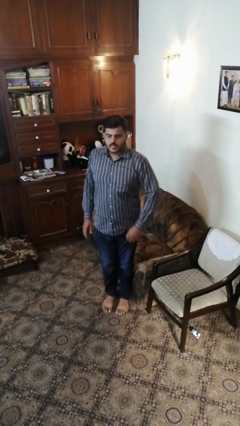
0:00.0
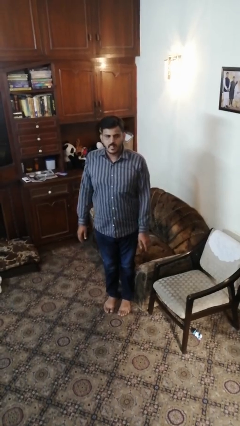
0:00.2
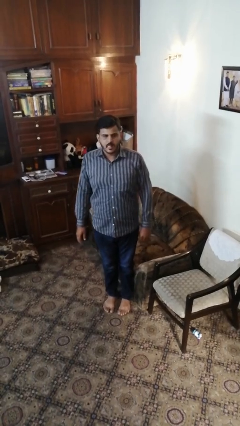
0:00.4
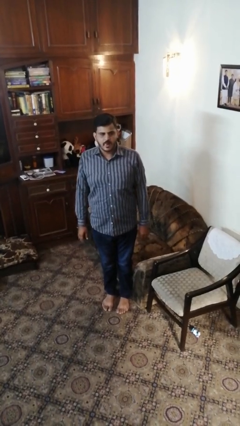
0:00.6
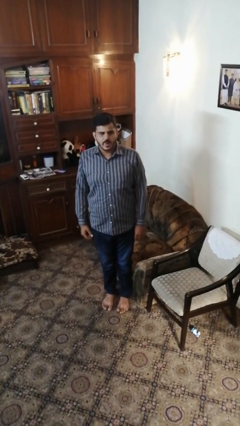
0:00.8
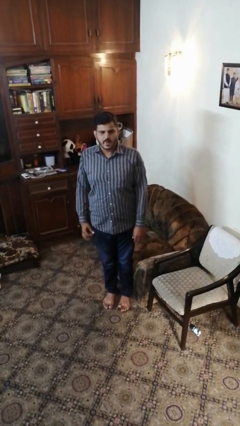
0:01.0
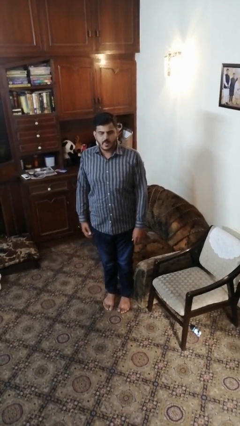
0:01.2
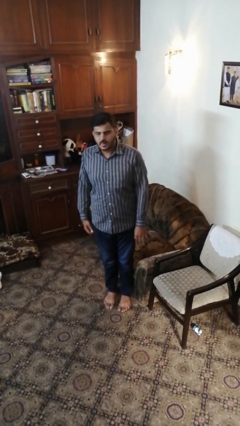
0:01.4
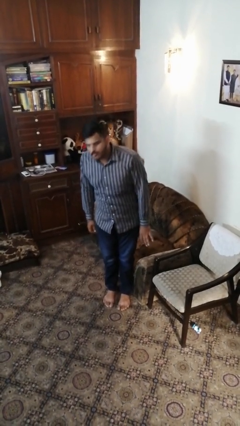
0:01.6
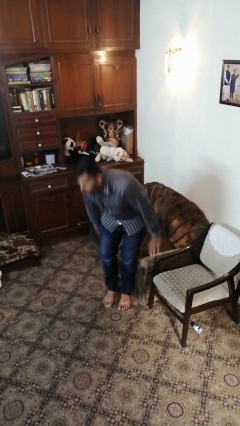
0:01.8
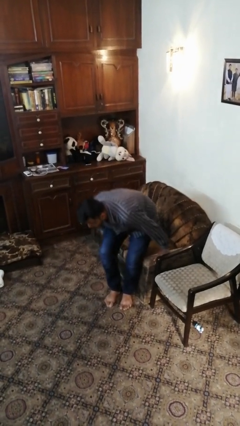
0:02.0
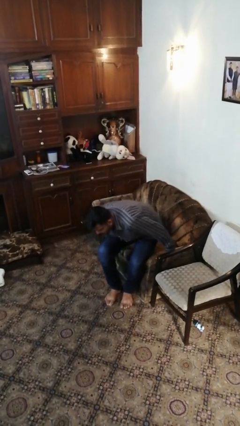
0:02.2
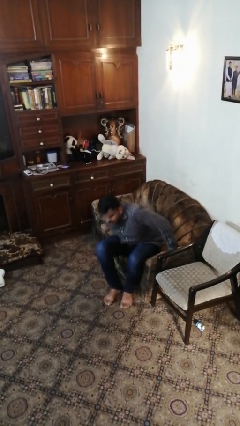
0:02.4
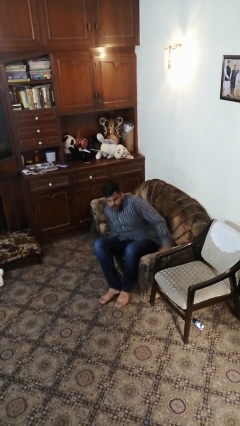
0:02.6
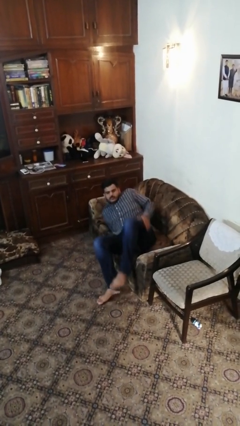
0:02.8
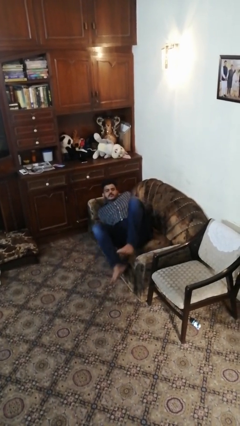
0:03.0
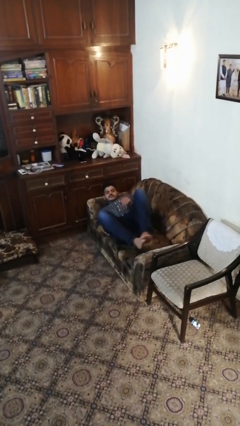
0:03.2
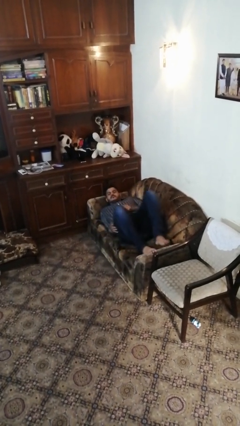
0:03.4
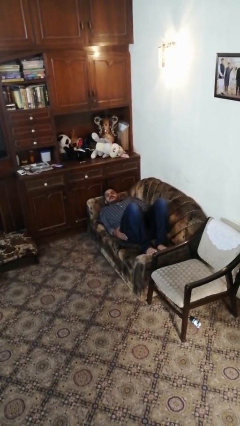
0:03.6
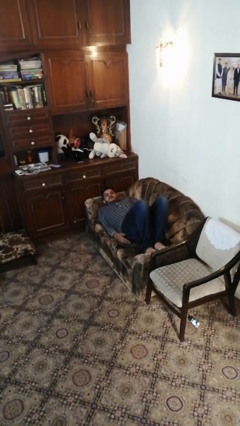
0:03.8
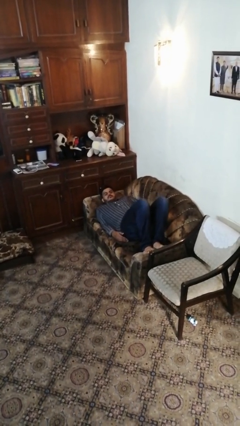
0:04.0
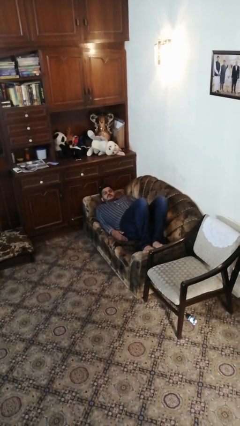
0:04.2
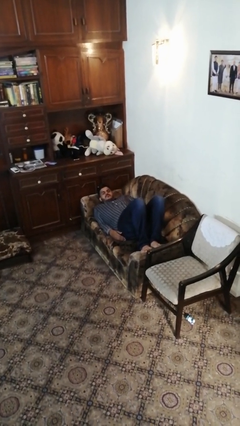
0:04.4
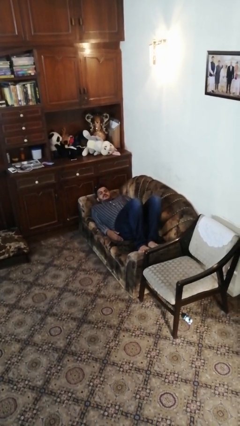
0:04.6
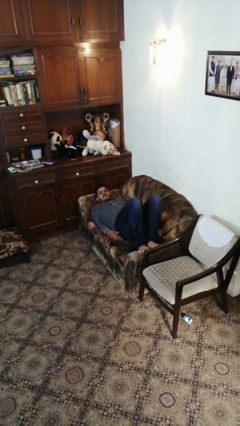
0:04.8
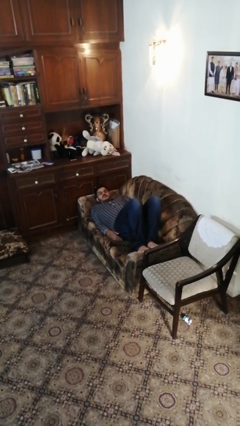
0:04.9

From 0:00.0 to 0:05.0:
person lies down on couch

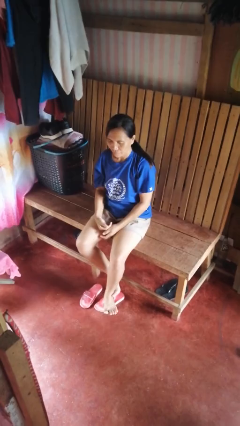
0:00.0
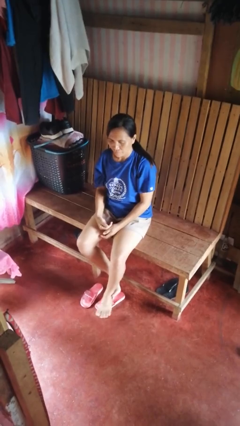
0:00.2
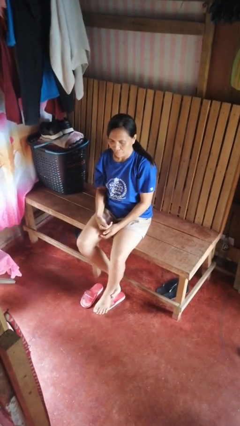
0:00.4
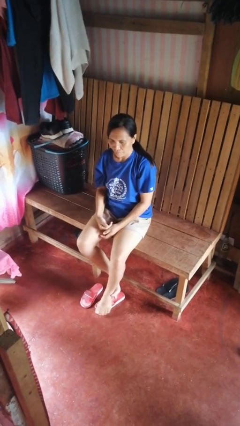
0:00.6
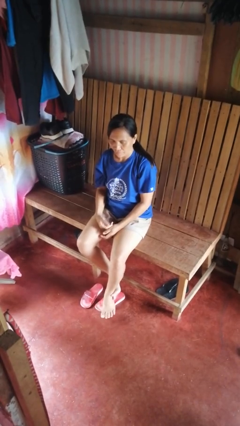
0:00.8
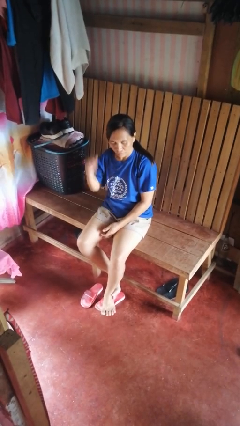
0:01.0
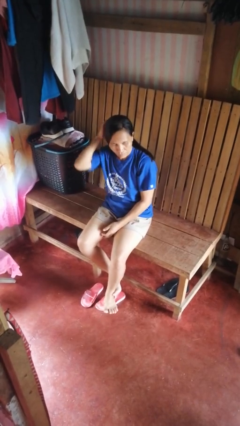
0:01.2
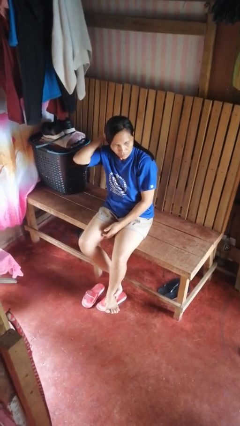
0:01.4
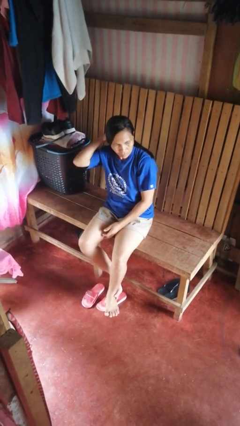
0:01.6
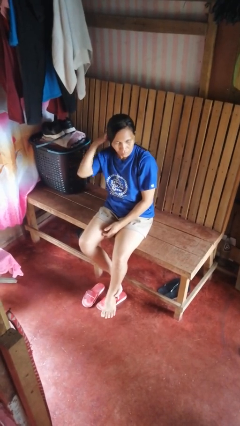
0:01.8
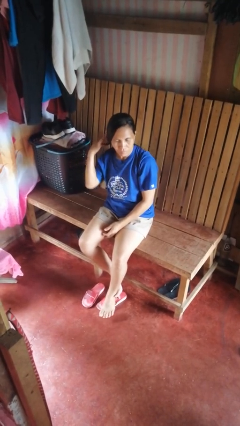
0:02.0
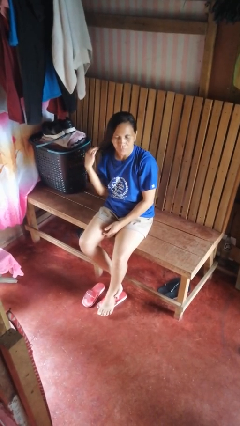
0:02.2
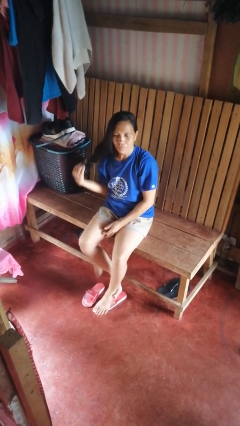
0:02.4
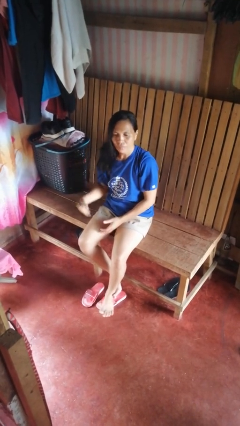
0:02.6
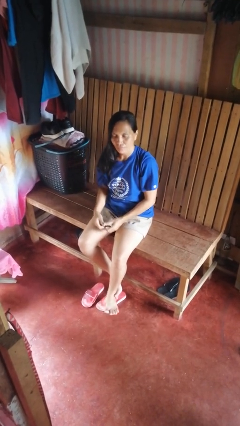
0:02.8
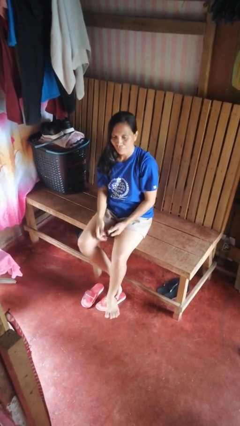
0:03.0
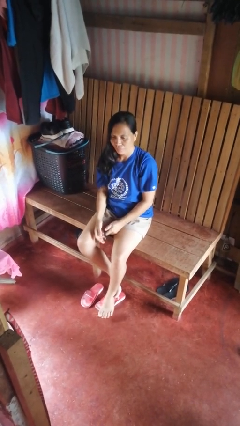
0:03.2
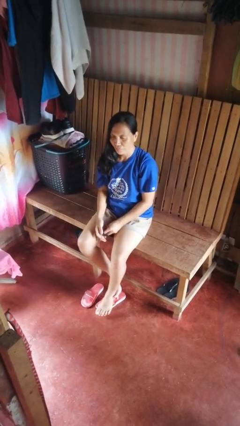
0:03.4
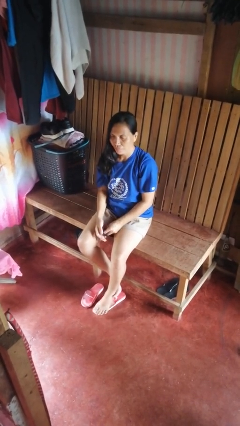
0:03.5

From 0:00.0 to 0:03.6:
person takes off hairtie

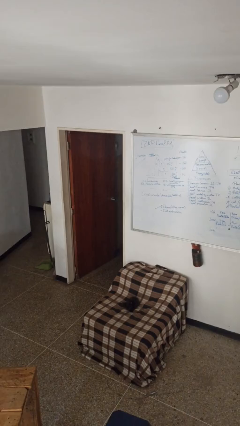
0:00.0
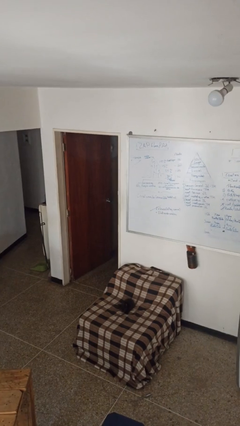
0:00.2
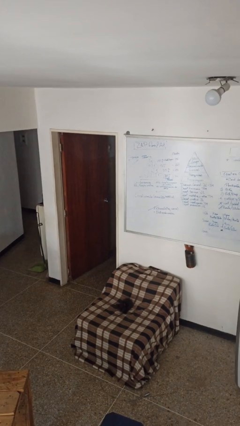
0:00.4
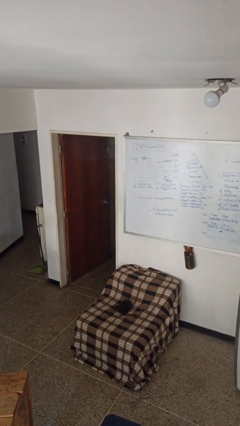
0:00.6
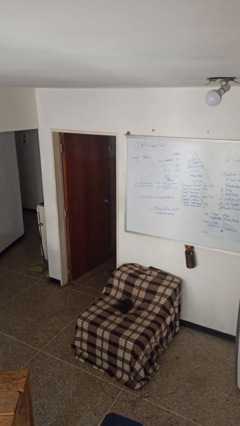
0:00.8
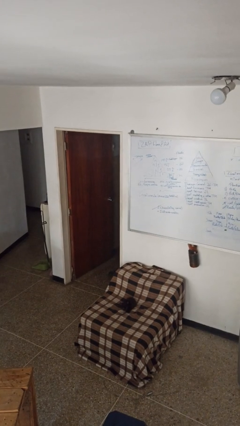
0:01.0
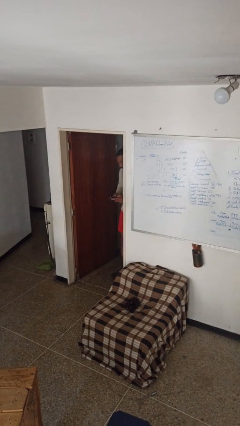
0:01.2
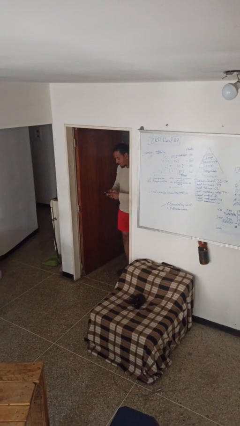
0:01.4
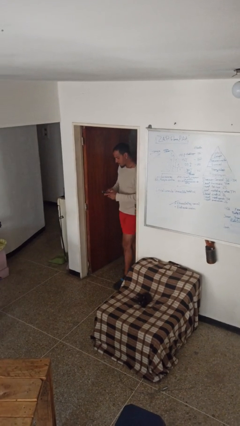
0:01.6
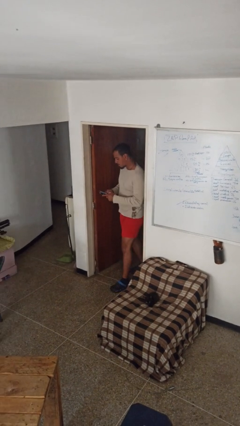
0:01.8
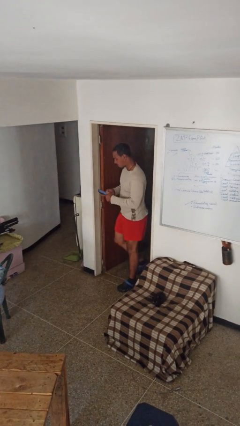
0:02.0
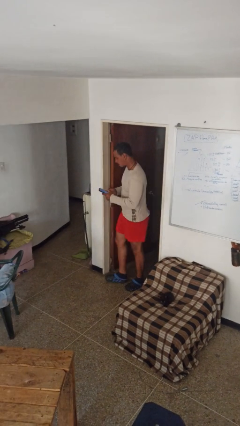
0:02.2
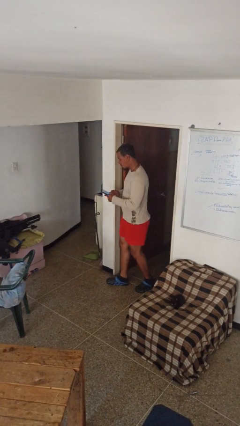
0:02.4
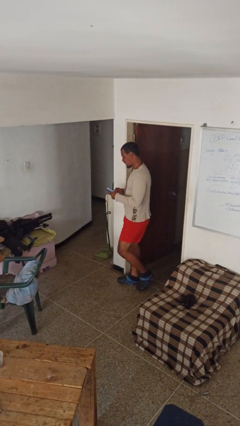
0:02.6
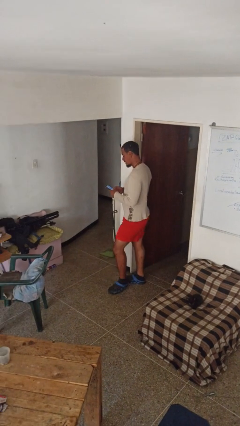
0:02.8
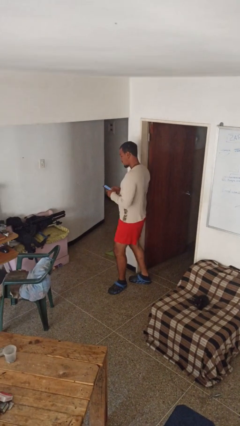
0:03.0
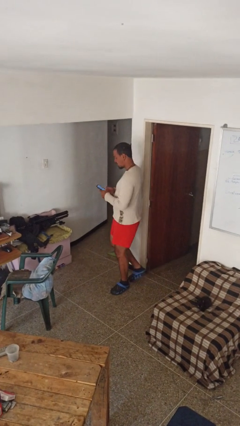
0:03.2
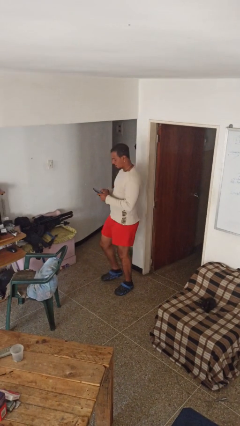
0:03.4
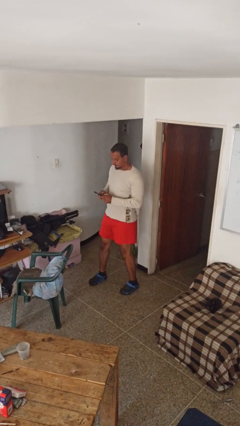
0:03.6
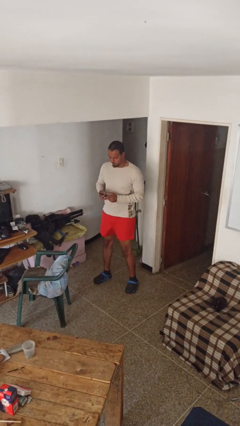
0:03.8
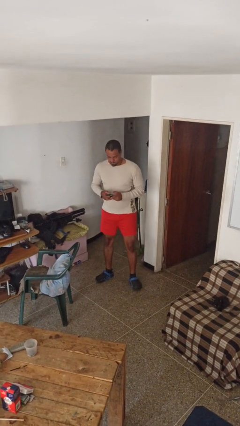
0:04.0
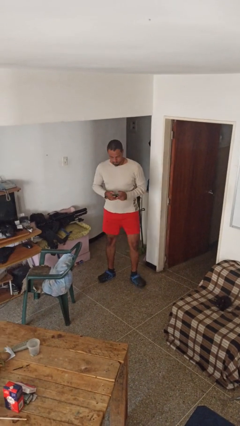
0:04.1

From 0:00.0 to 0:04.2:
person enters scene through structure

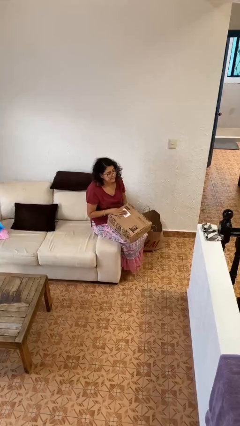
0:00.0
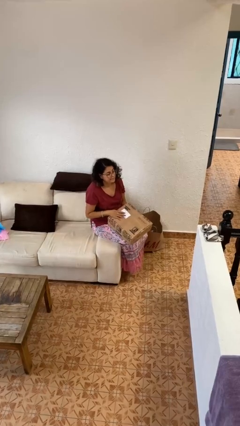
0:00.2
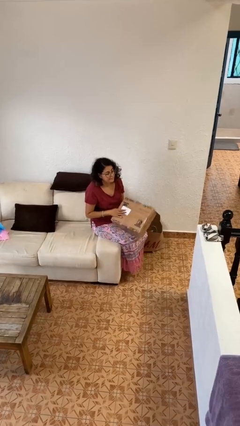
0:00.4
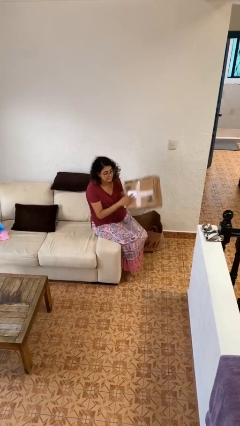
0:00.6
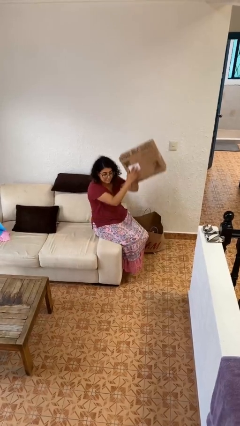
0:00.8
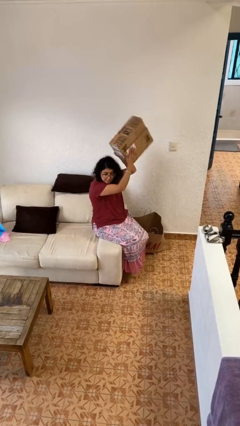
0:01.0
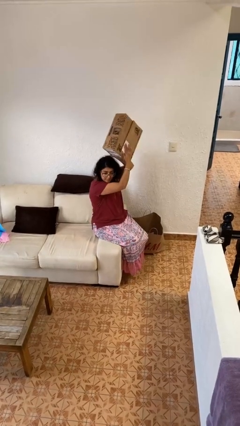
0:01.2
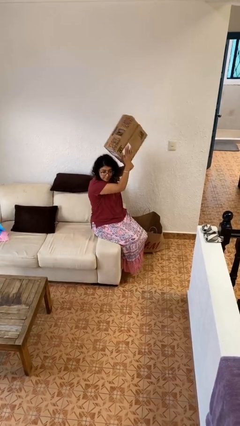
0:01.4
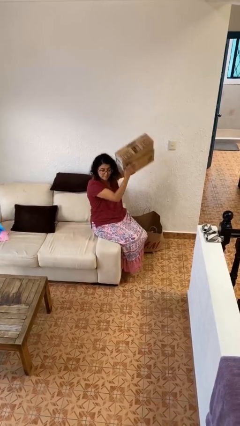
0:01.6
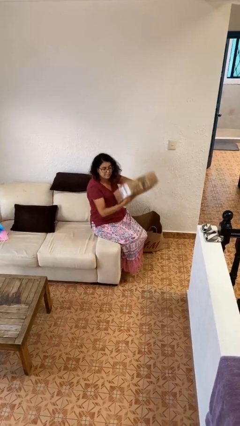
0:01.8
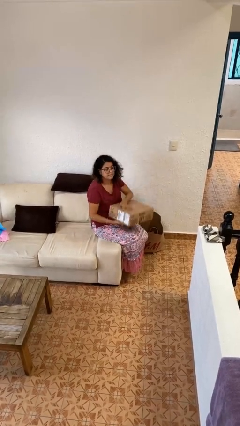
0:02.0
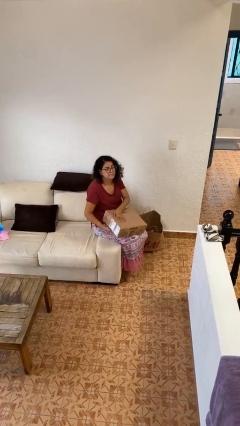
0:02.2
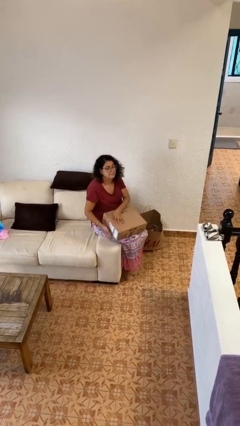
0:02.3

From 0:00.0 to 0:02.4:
person holds object above head

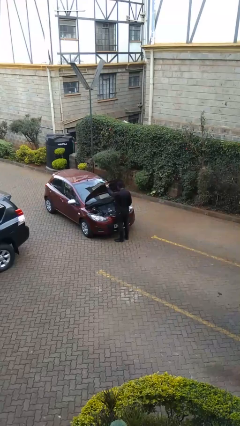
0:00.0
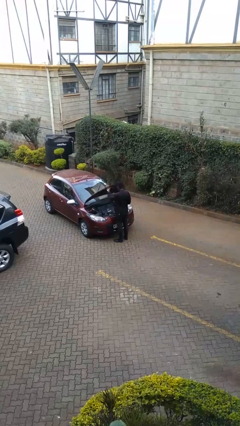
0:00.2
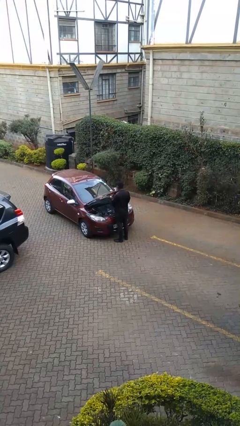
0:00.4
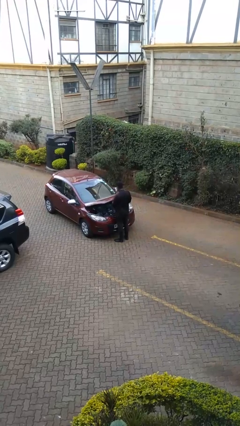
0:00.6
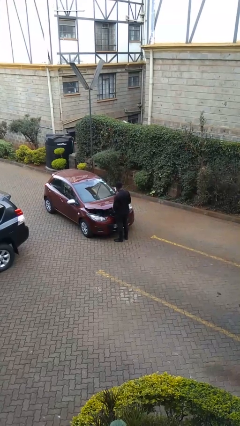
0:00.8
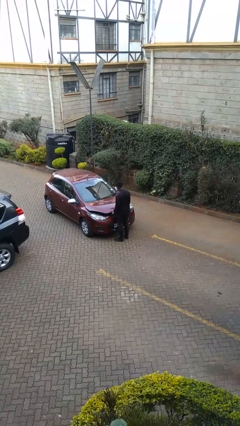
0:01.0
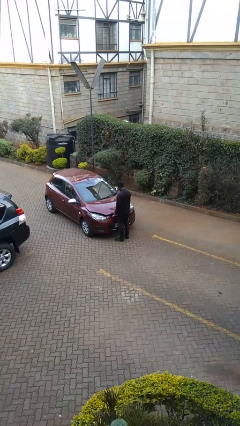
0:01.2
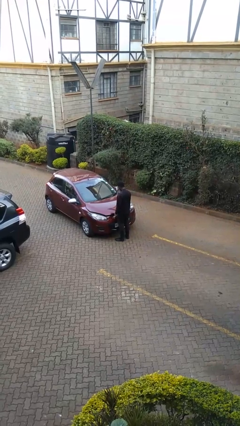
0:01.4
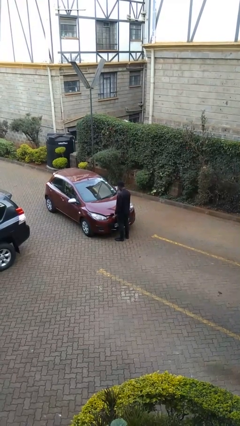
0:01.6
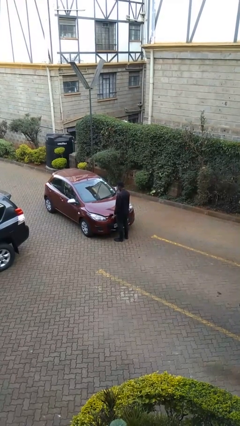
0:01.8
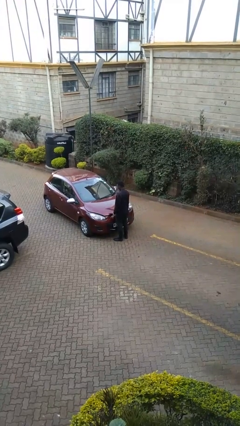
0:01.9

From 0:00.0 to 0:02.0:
person closes car hood
